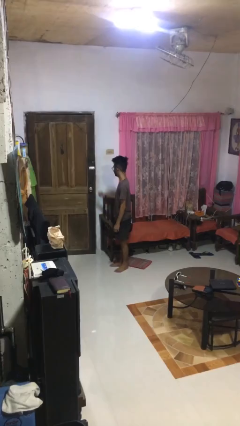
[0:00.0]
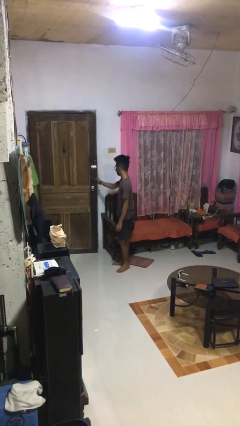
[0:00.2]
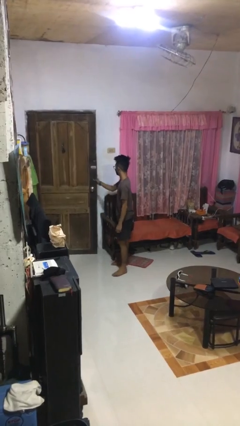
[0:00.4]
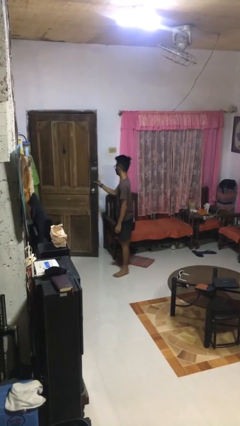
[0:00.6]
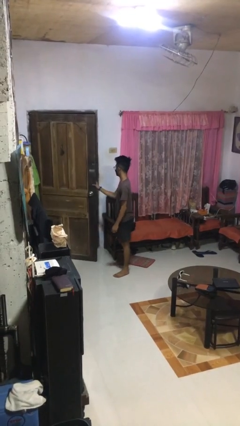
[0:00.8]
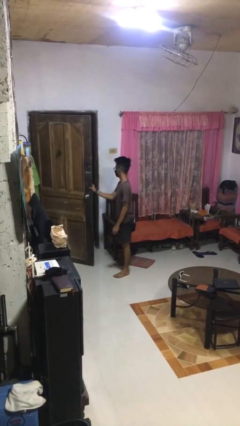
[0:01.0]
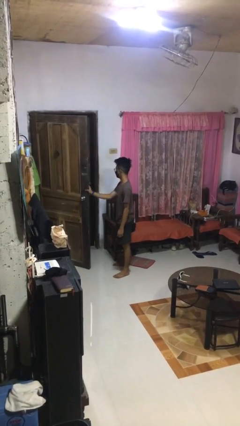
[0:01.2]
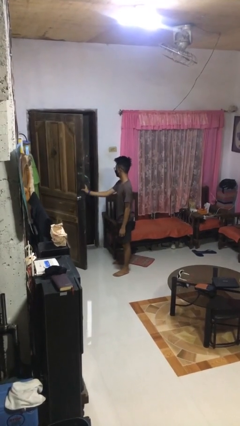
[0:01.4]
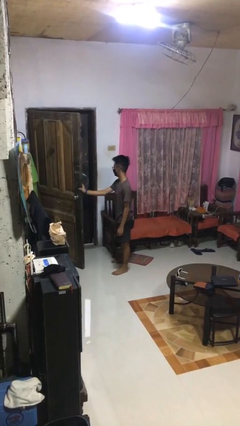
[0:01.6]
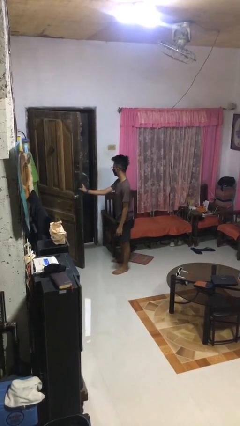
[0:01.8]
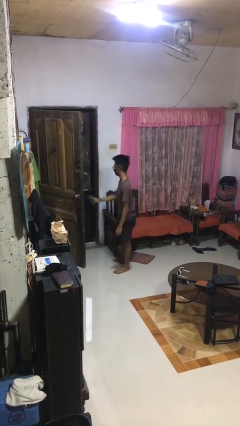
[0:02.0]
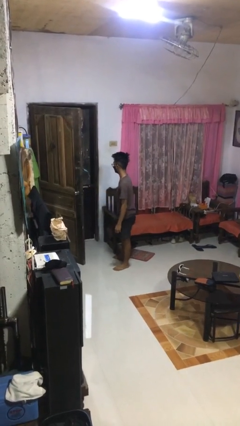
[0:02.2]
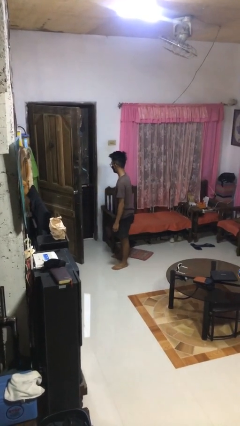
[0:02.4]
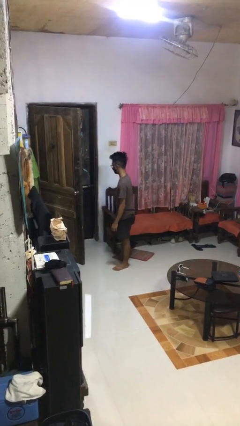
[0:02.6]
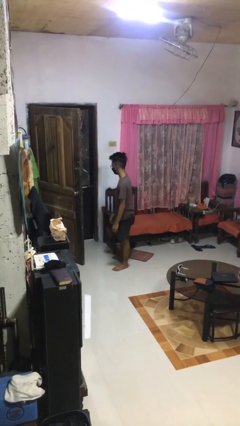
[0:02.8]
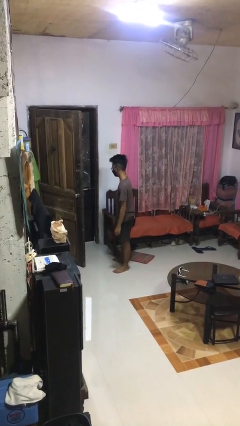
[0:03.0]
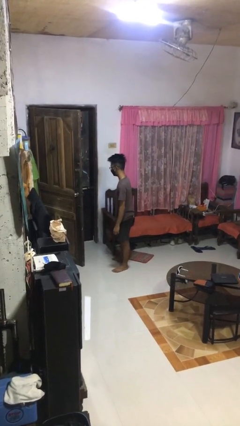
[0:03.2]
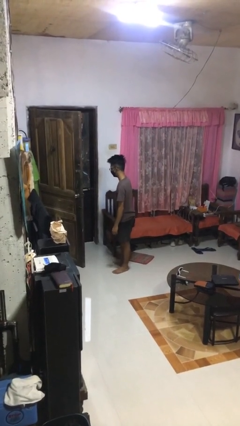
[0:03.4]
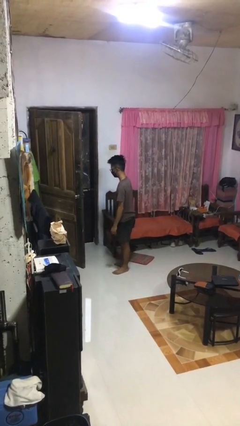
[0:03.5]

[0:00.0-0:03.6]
person opens facility door

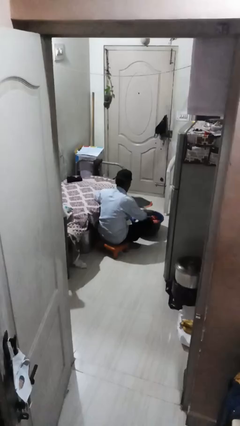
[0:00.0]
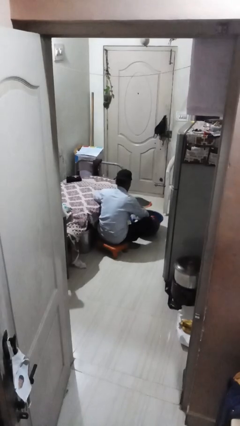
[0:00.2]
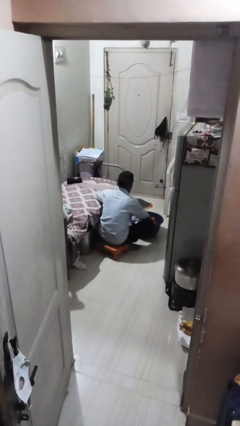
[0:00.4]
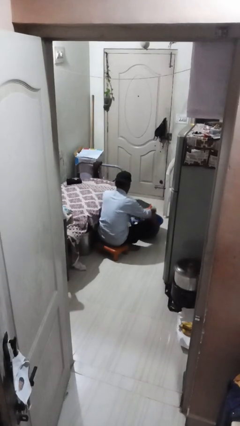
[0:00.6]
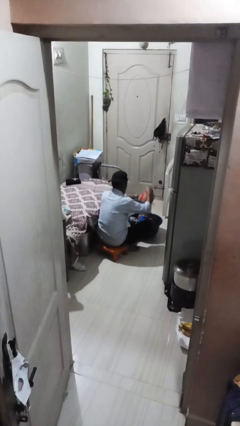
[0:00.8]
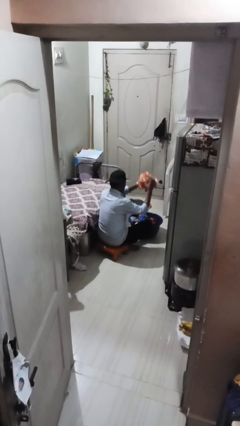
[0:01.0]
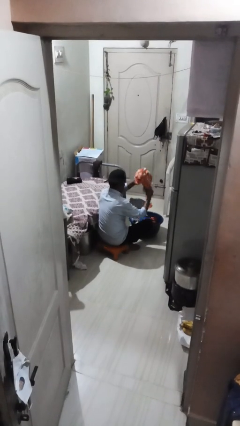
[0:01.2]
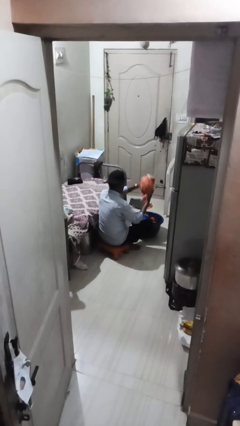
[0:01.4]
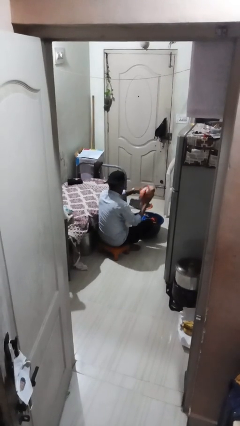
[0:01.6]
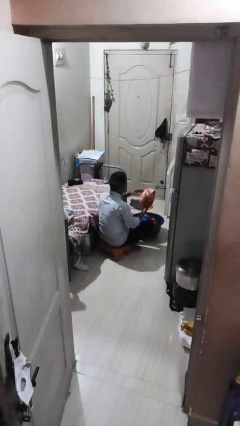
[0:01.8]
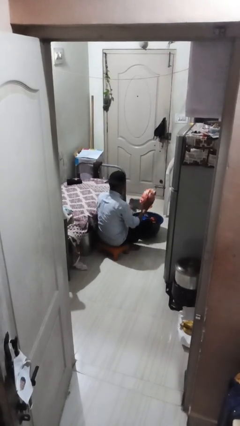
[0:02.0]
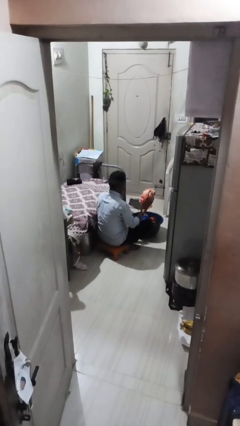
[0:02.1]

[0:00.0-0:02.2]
person takes object from basket

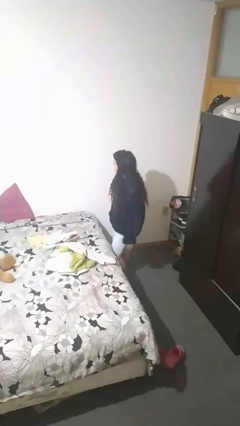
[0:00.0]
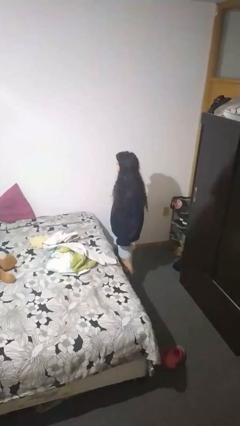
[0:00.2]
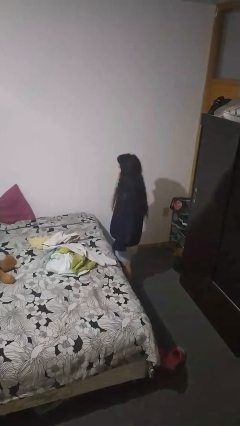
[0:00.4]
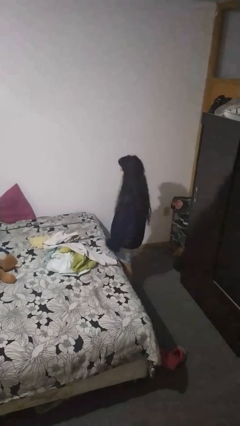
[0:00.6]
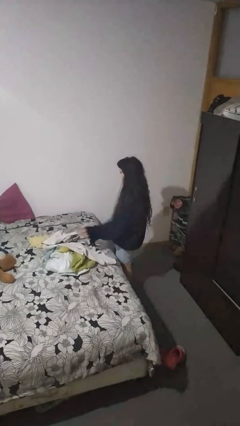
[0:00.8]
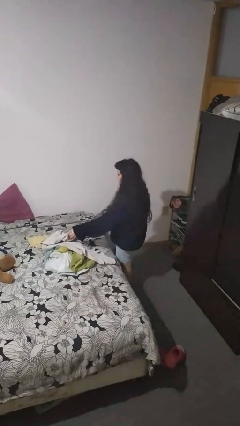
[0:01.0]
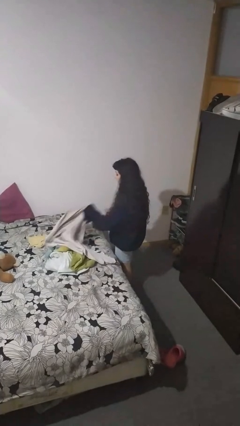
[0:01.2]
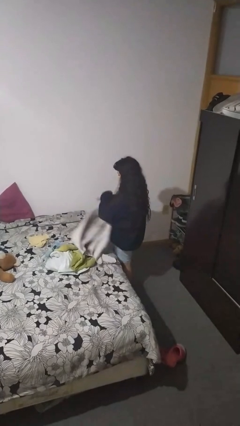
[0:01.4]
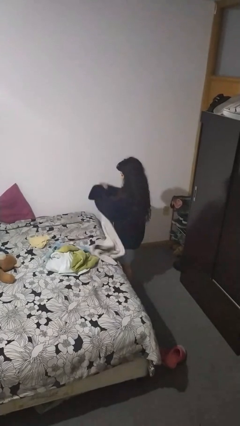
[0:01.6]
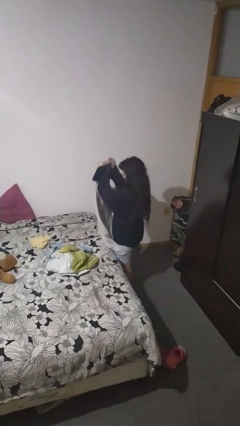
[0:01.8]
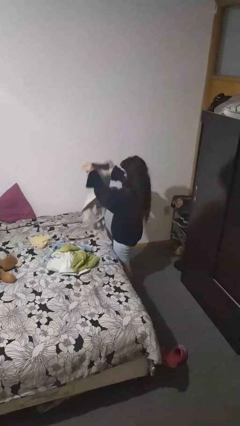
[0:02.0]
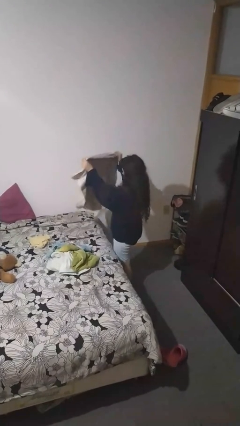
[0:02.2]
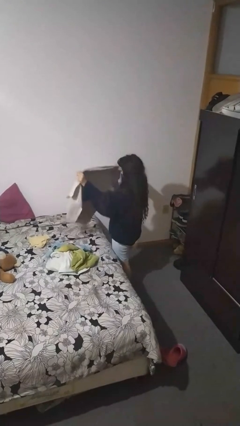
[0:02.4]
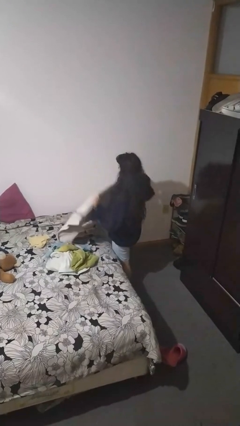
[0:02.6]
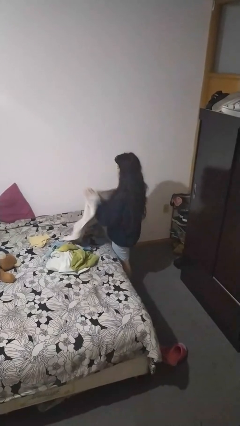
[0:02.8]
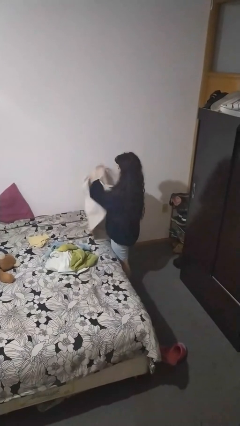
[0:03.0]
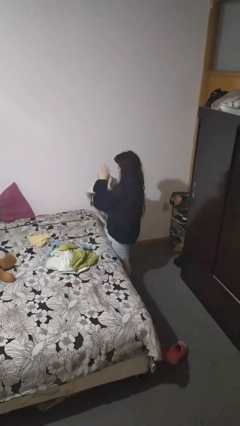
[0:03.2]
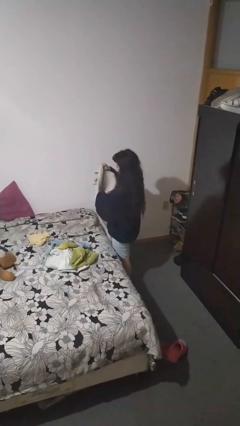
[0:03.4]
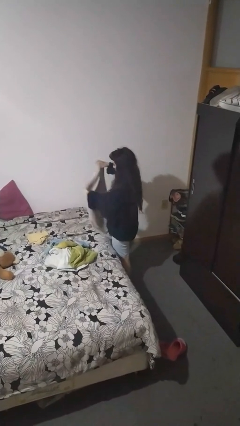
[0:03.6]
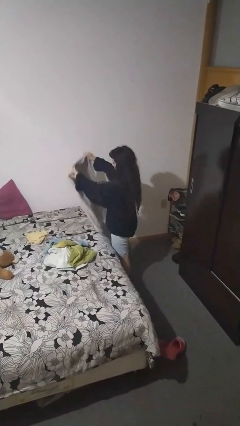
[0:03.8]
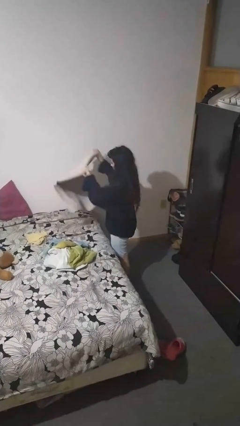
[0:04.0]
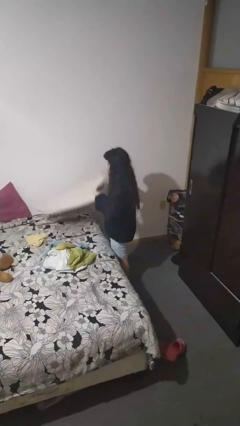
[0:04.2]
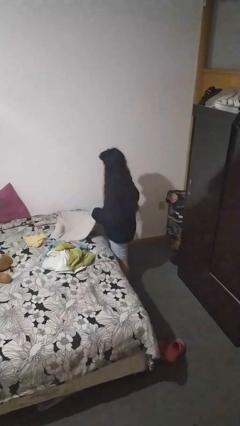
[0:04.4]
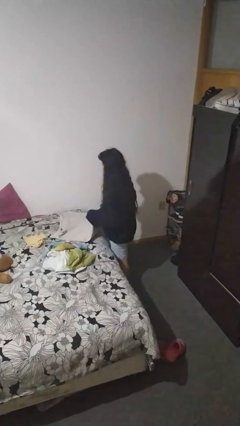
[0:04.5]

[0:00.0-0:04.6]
person folds towel

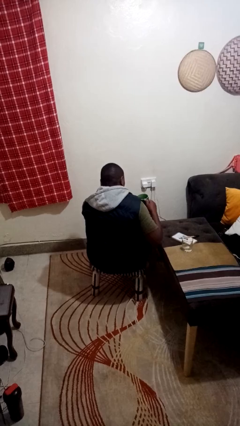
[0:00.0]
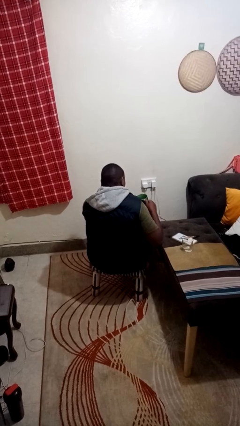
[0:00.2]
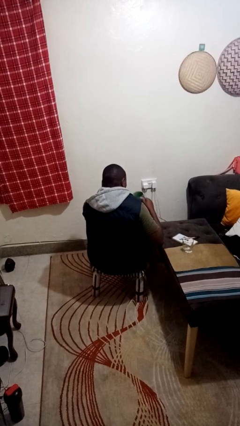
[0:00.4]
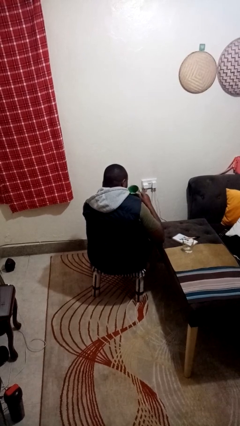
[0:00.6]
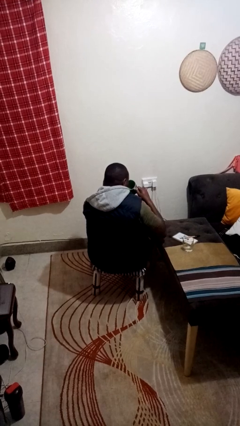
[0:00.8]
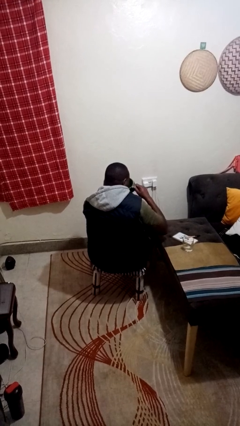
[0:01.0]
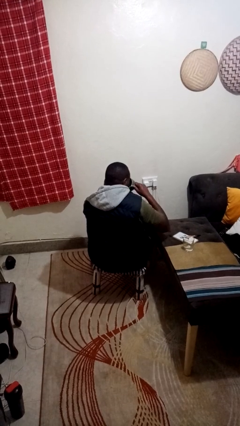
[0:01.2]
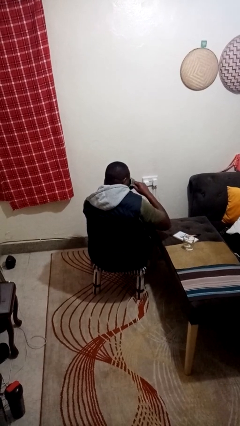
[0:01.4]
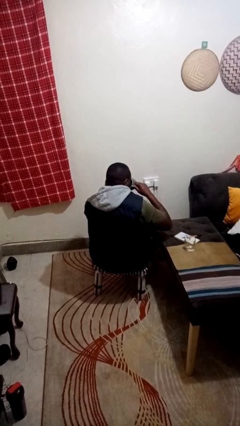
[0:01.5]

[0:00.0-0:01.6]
person drinks from mug

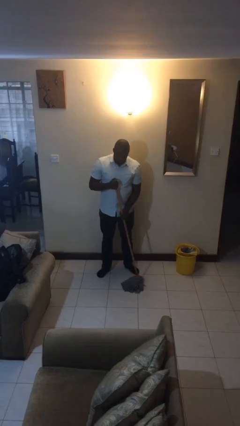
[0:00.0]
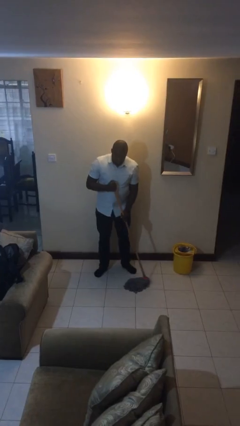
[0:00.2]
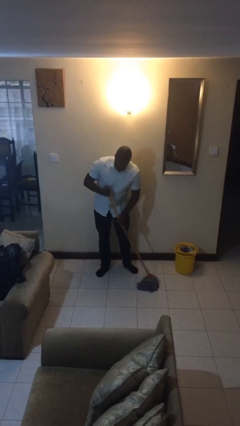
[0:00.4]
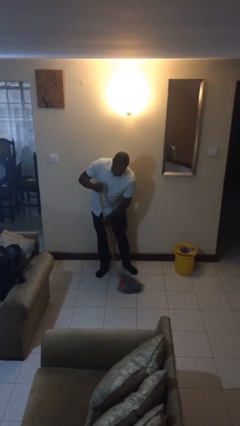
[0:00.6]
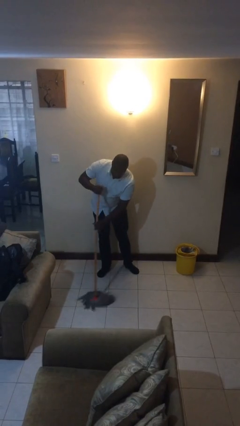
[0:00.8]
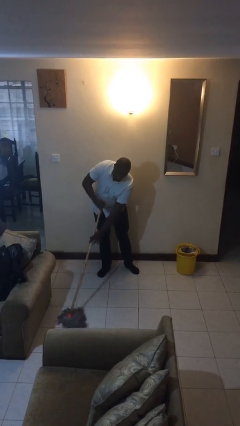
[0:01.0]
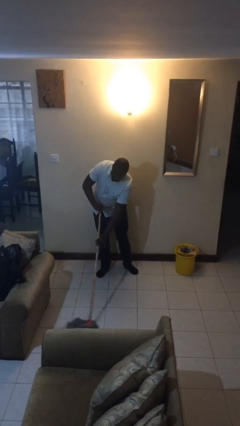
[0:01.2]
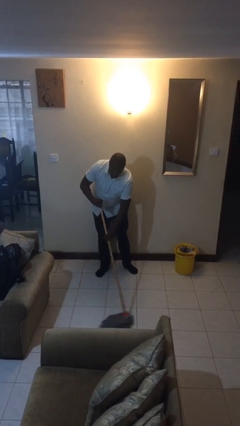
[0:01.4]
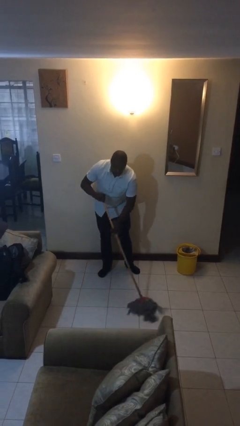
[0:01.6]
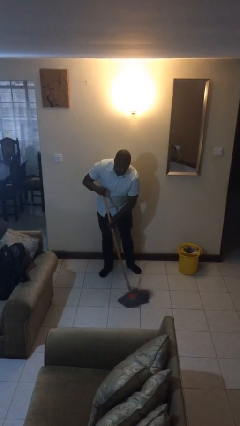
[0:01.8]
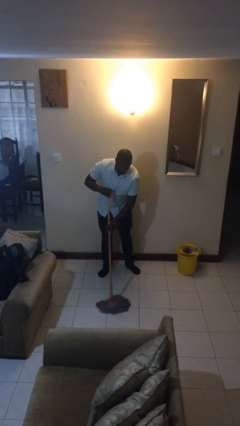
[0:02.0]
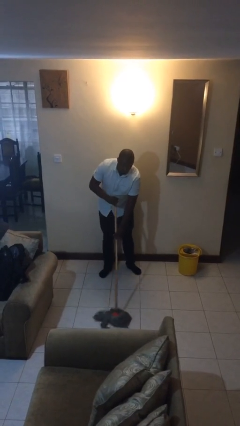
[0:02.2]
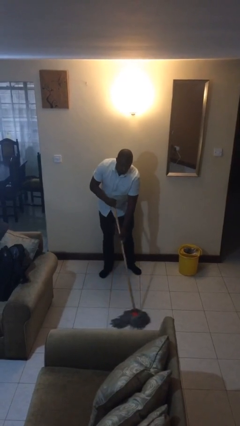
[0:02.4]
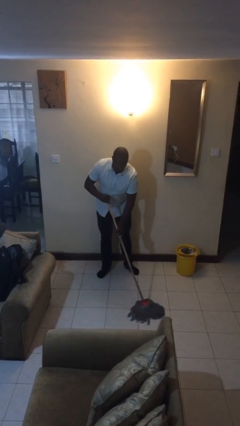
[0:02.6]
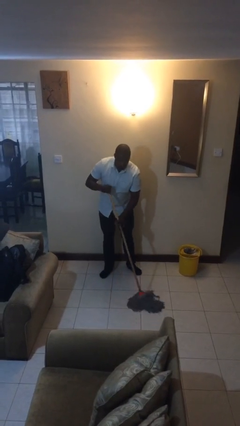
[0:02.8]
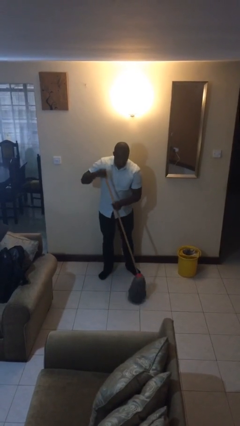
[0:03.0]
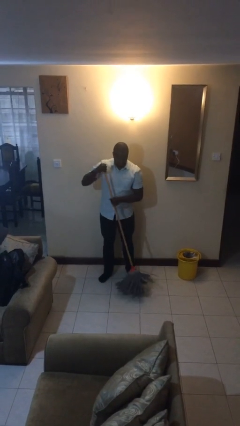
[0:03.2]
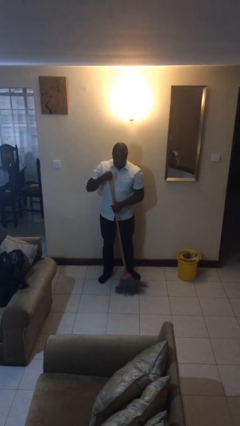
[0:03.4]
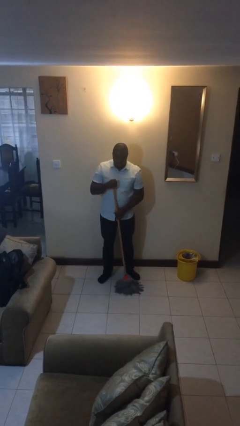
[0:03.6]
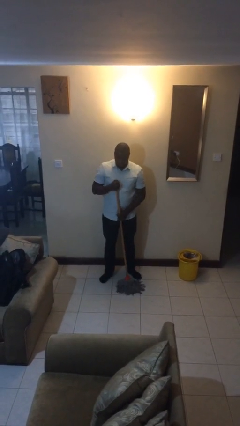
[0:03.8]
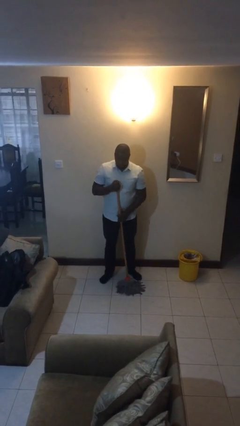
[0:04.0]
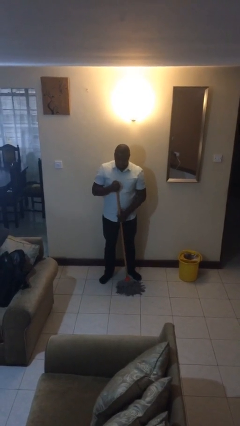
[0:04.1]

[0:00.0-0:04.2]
person mops

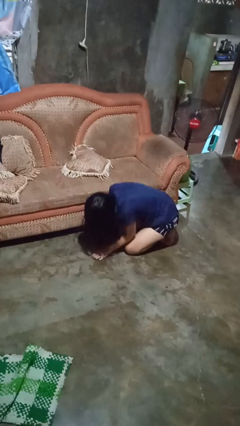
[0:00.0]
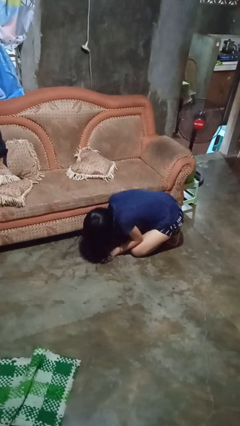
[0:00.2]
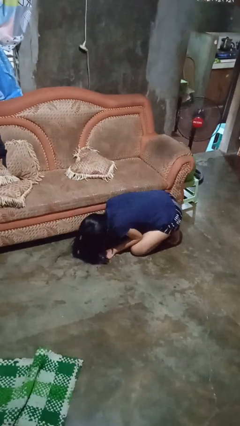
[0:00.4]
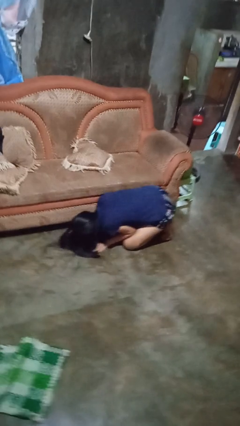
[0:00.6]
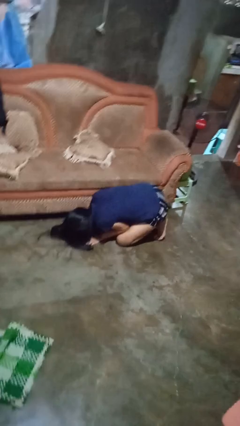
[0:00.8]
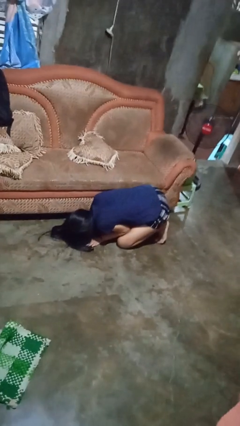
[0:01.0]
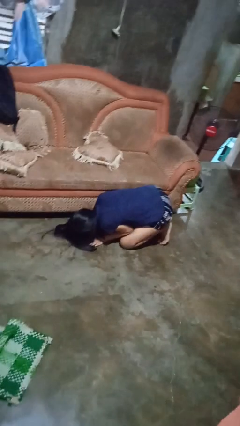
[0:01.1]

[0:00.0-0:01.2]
person searches under couch

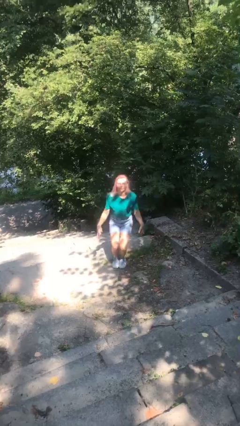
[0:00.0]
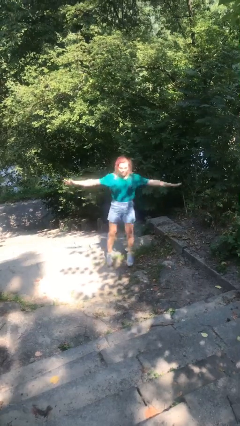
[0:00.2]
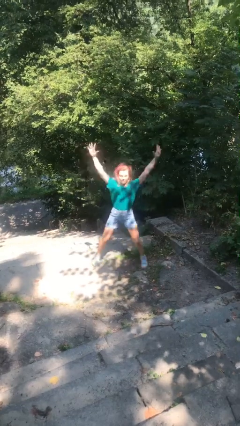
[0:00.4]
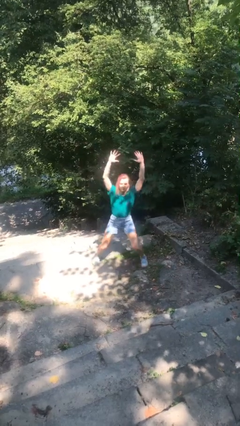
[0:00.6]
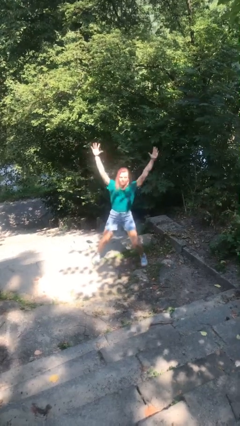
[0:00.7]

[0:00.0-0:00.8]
person exercises with jumping jacks
